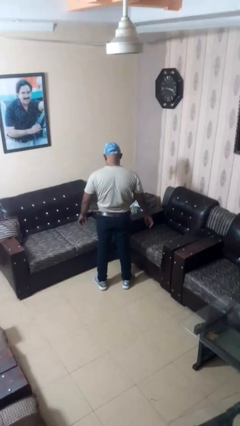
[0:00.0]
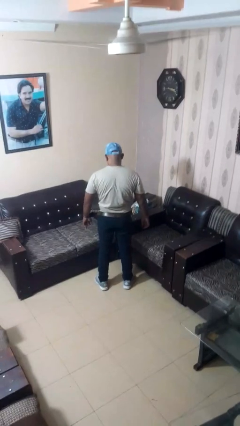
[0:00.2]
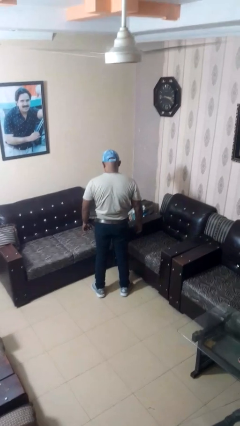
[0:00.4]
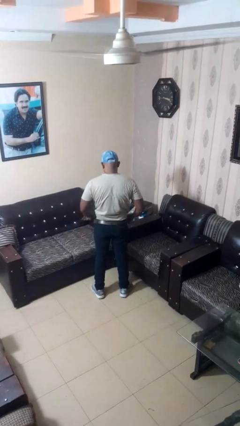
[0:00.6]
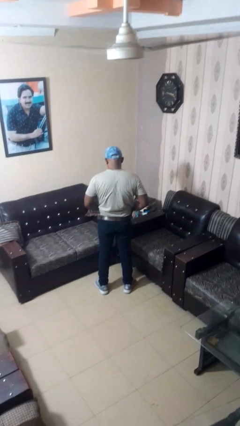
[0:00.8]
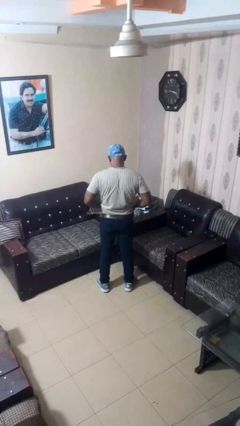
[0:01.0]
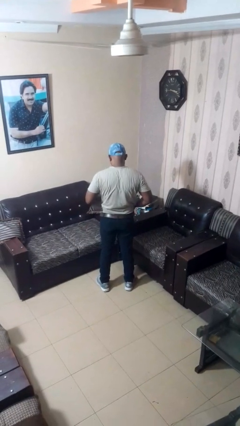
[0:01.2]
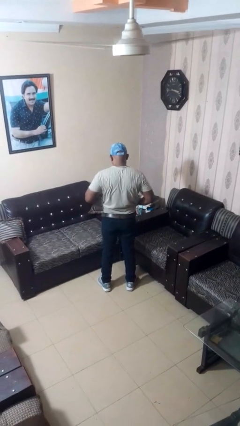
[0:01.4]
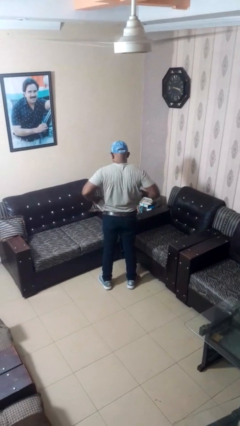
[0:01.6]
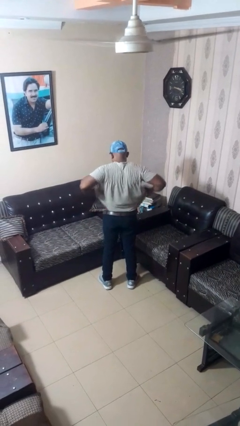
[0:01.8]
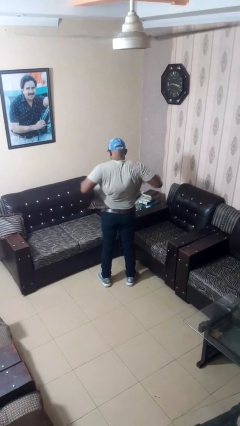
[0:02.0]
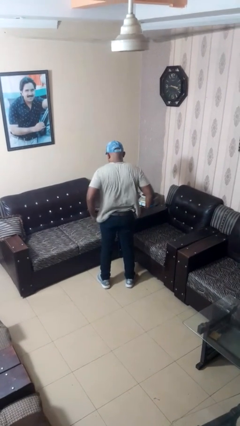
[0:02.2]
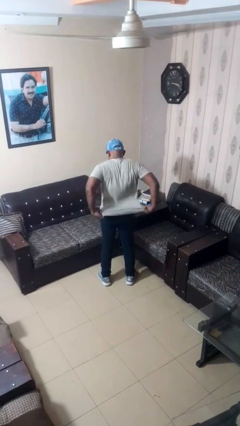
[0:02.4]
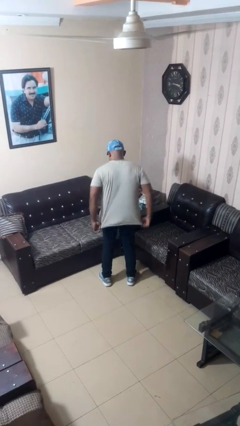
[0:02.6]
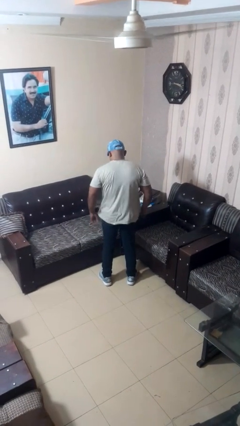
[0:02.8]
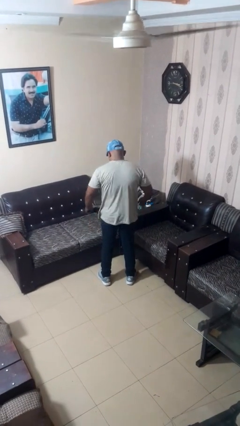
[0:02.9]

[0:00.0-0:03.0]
person untucks shirt

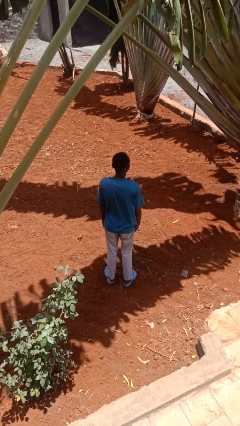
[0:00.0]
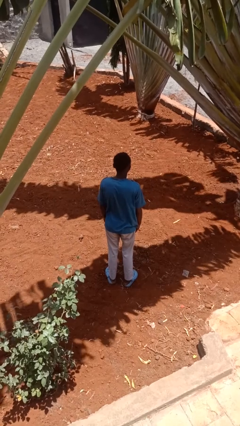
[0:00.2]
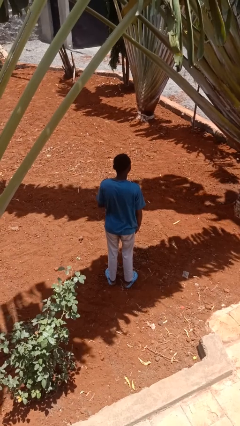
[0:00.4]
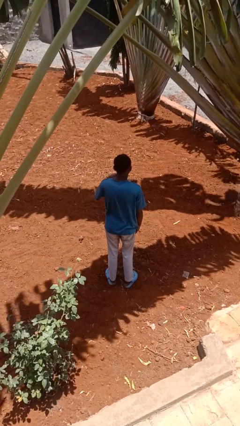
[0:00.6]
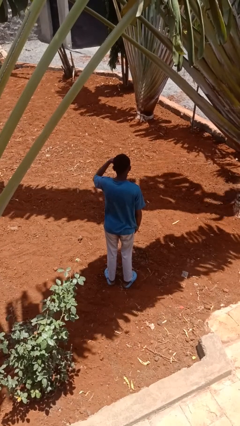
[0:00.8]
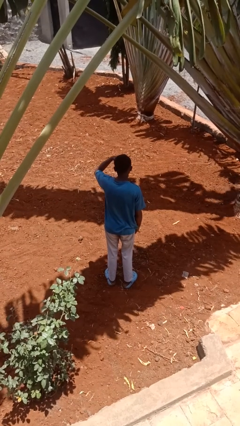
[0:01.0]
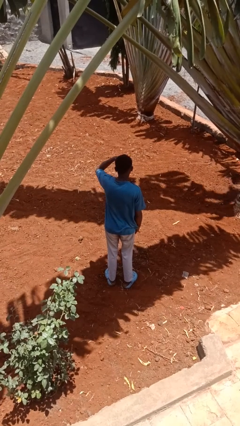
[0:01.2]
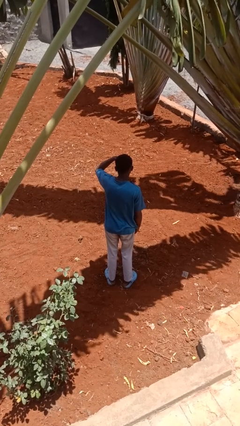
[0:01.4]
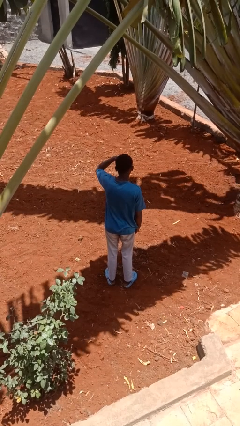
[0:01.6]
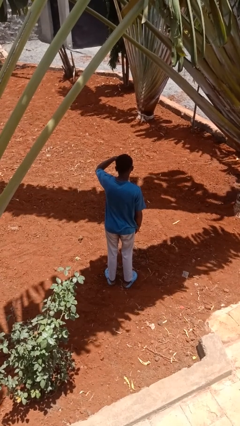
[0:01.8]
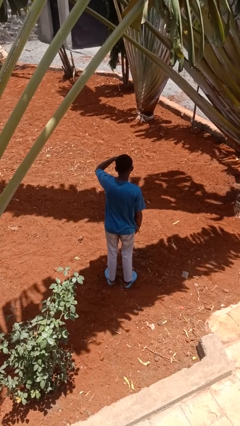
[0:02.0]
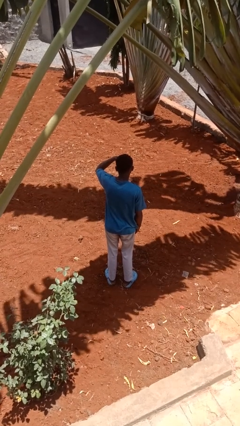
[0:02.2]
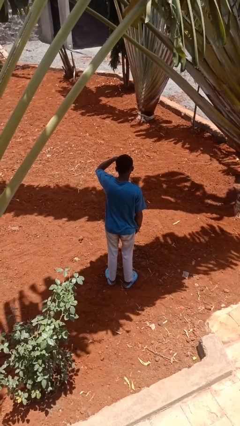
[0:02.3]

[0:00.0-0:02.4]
person shades eyes

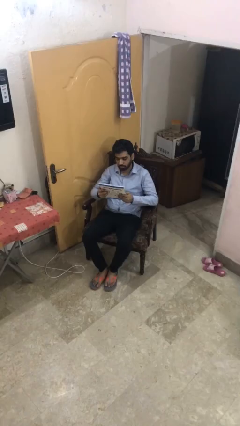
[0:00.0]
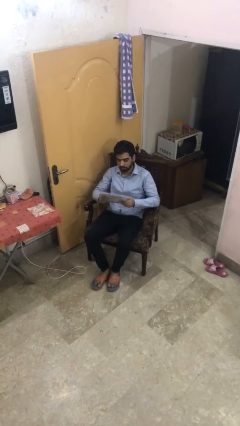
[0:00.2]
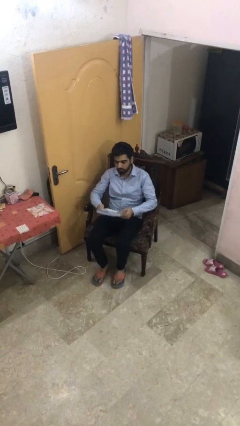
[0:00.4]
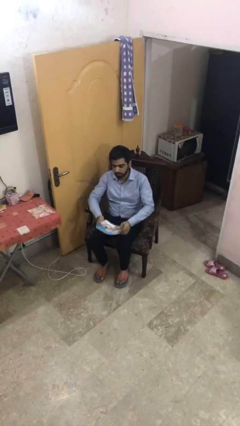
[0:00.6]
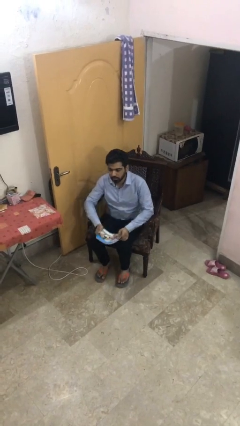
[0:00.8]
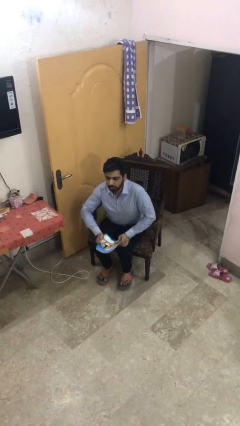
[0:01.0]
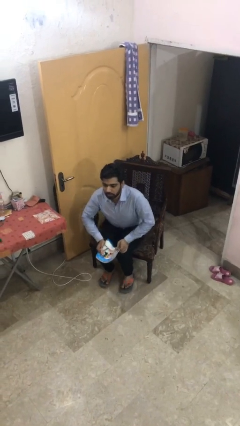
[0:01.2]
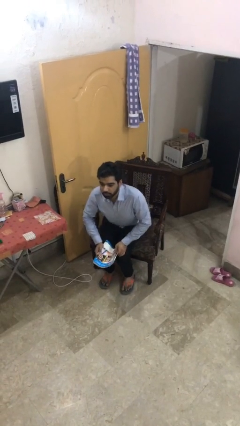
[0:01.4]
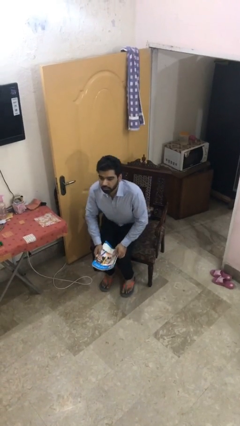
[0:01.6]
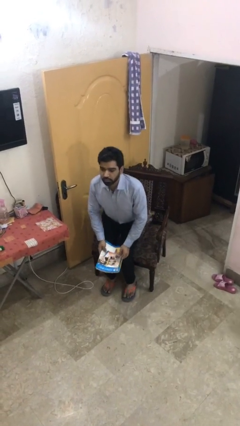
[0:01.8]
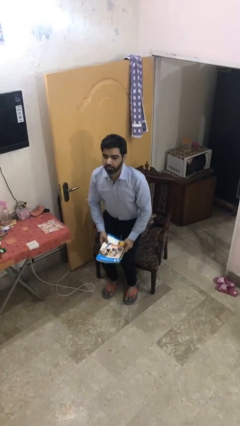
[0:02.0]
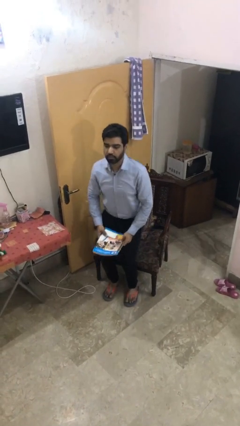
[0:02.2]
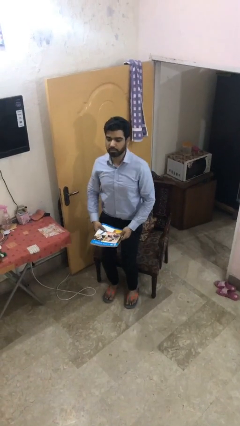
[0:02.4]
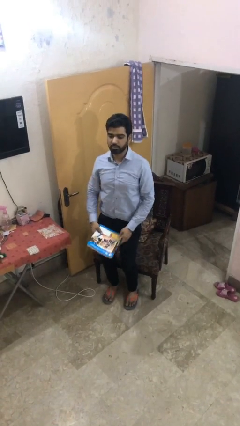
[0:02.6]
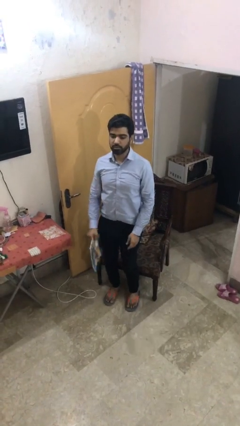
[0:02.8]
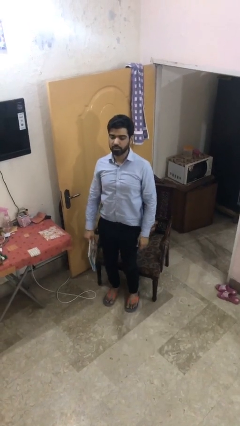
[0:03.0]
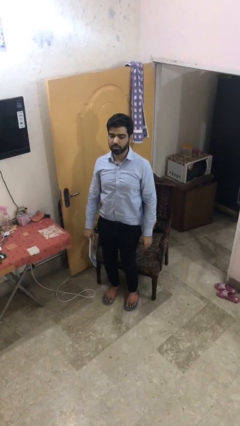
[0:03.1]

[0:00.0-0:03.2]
person stands up

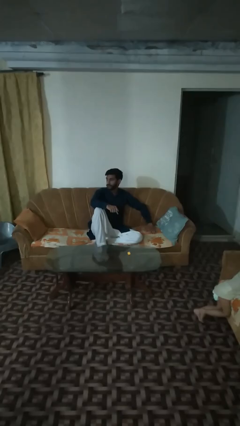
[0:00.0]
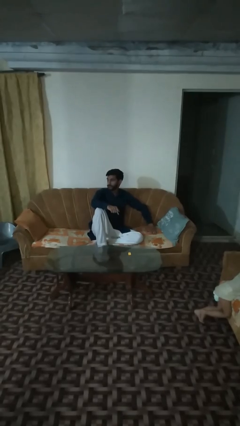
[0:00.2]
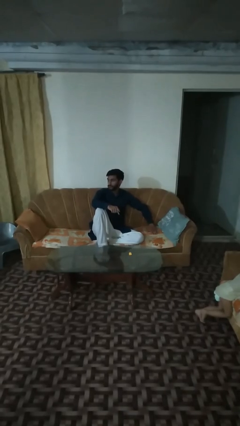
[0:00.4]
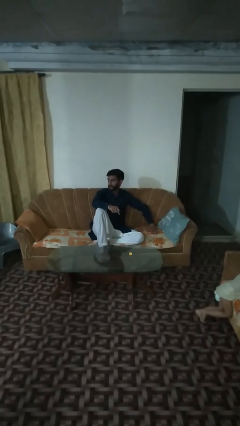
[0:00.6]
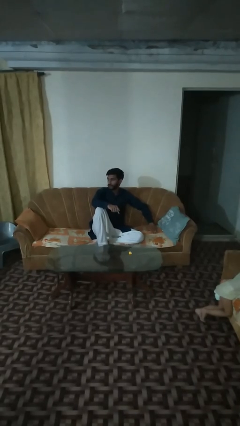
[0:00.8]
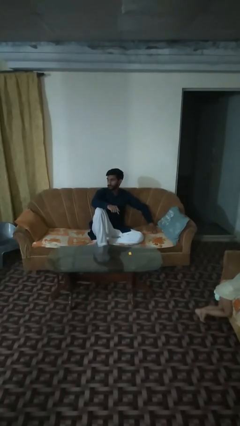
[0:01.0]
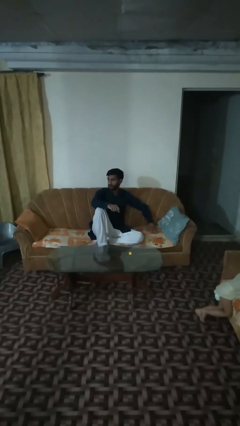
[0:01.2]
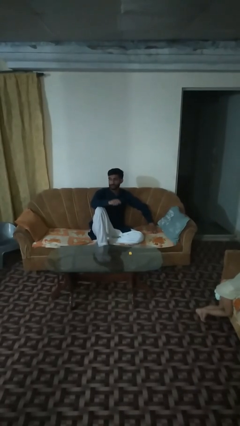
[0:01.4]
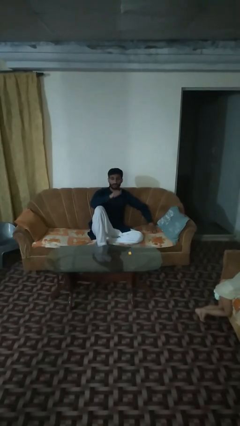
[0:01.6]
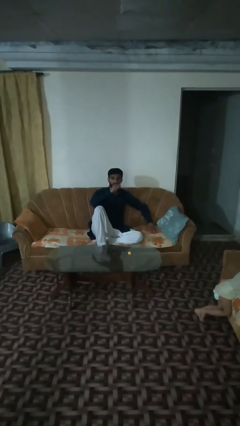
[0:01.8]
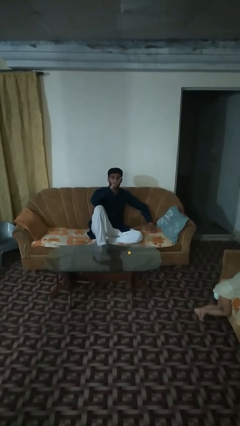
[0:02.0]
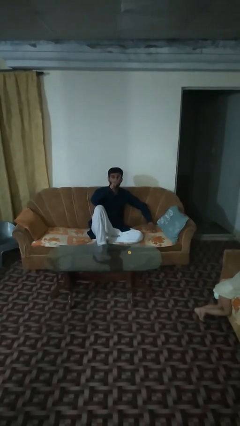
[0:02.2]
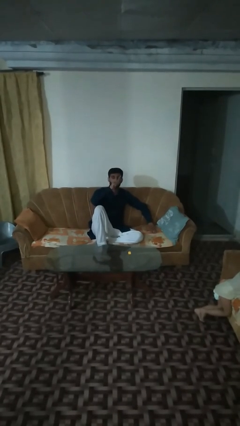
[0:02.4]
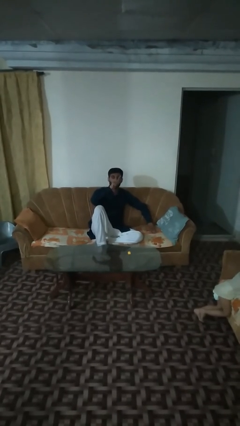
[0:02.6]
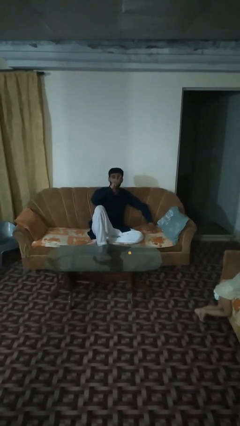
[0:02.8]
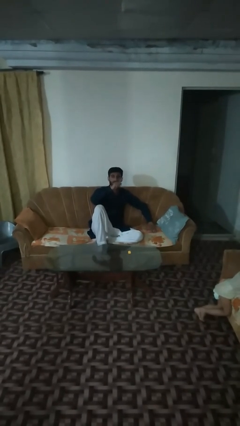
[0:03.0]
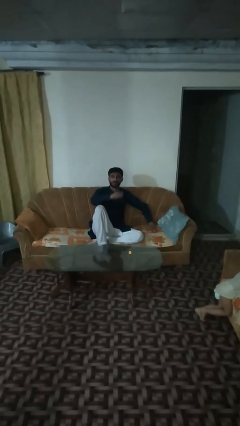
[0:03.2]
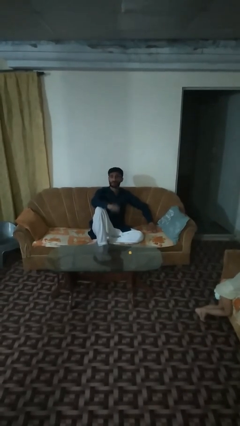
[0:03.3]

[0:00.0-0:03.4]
person vapes

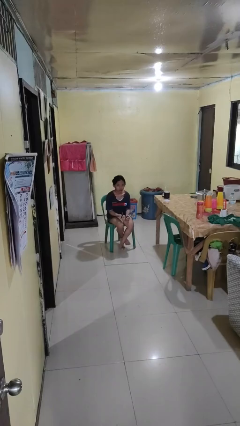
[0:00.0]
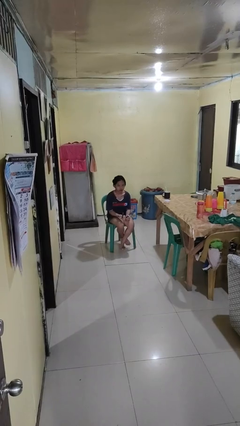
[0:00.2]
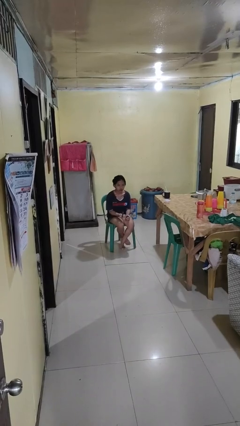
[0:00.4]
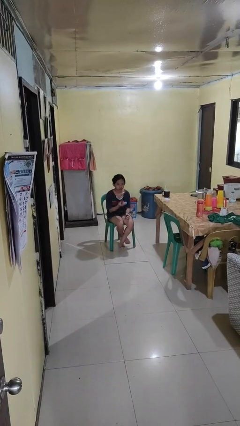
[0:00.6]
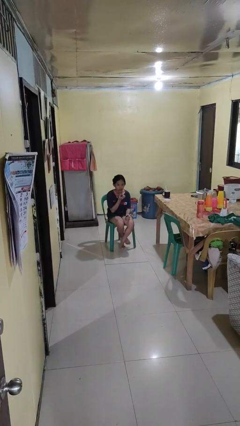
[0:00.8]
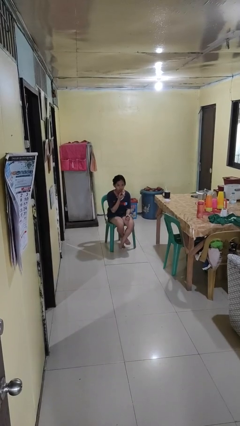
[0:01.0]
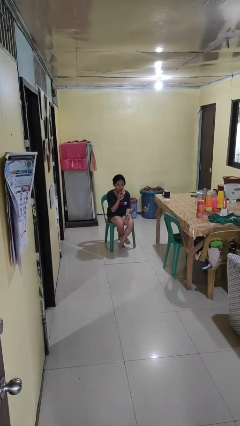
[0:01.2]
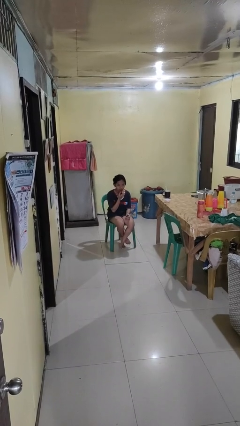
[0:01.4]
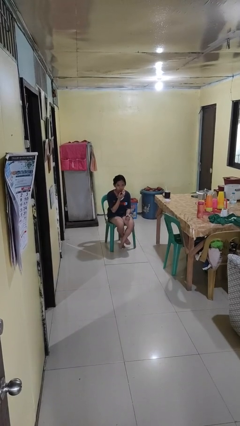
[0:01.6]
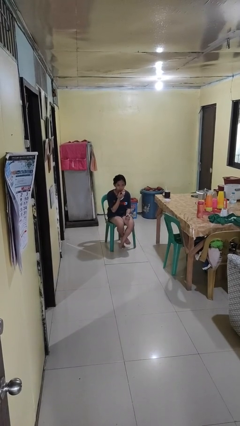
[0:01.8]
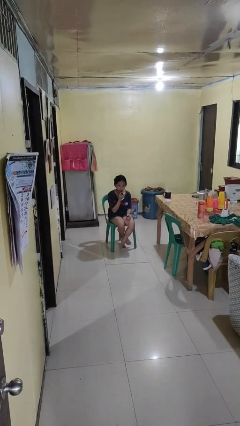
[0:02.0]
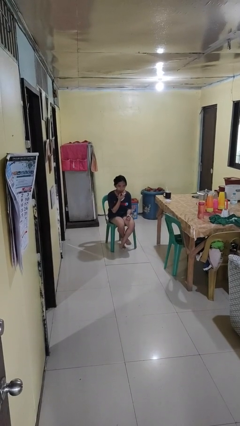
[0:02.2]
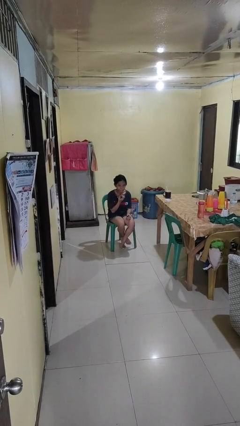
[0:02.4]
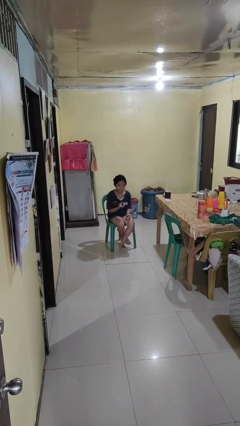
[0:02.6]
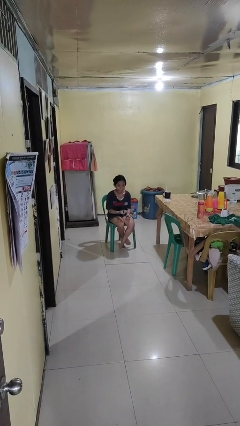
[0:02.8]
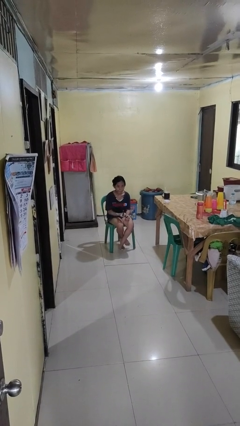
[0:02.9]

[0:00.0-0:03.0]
person applies lip makeup

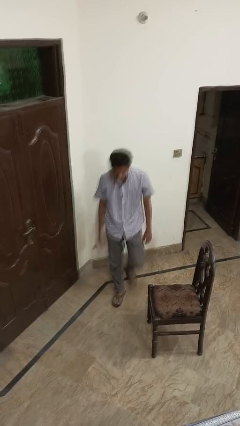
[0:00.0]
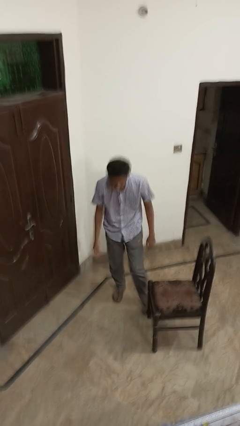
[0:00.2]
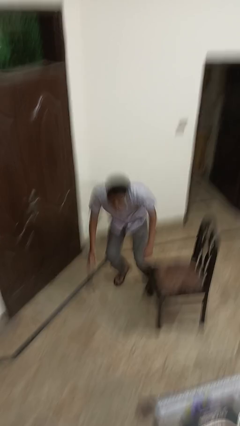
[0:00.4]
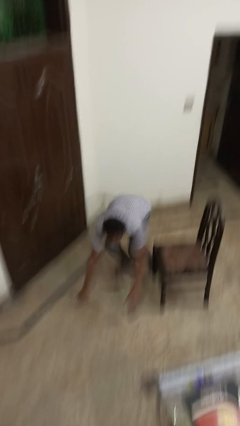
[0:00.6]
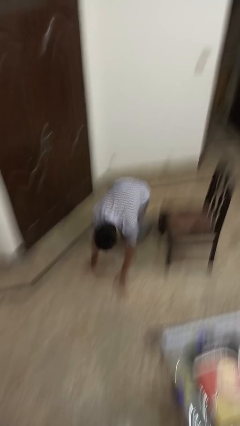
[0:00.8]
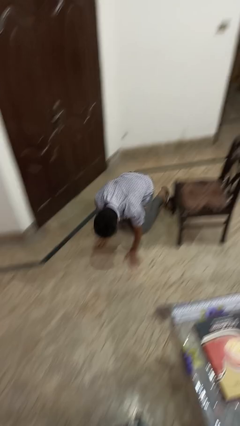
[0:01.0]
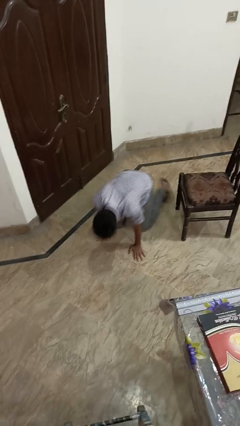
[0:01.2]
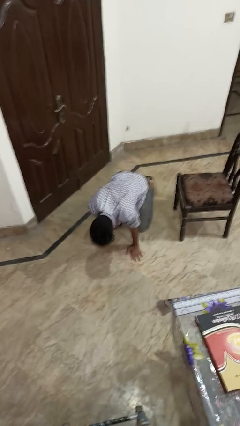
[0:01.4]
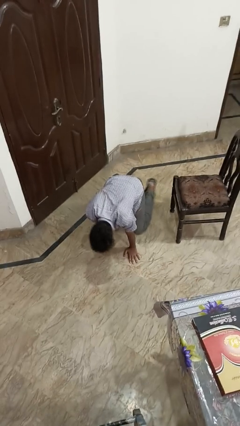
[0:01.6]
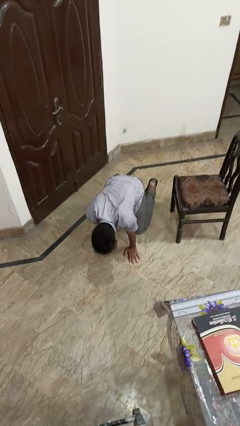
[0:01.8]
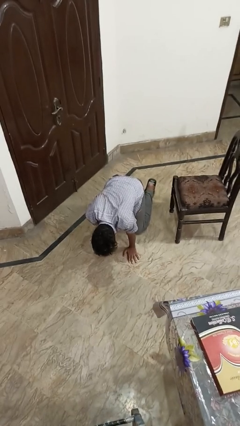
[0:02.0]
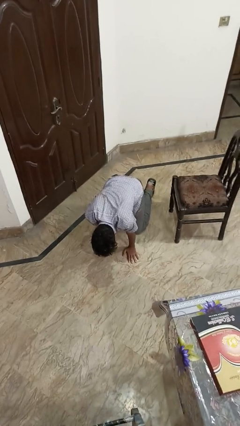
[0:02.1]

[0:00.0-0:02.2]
person trips on object on floor

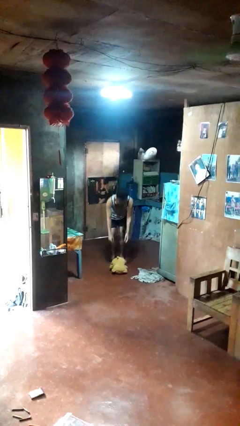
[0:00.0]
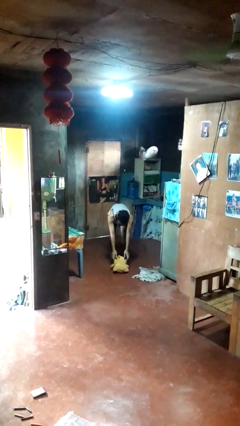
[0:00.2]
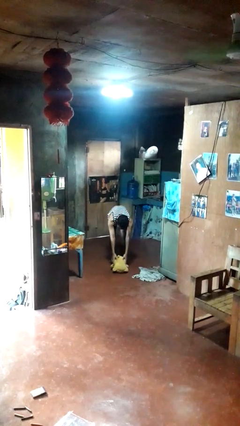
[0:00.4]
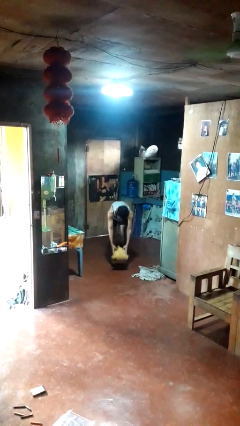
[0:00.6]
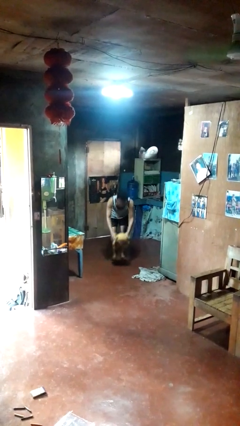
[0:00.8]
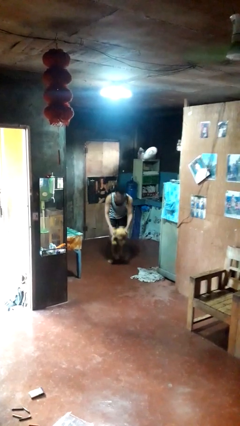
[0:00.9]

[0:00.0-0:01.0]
person picks up object from floor
